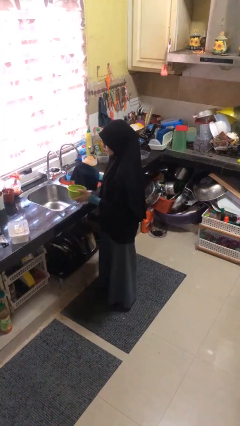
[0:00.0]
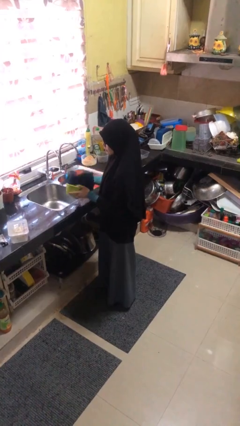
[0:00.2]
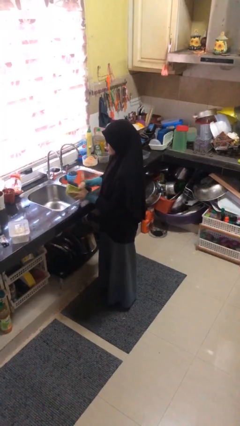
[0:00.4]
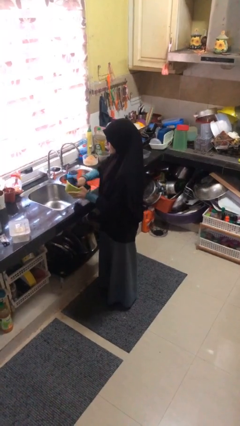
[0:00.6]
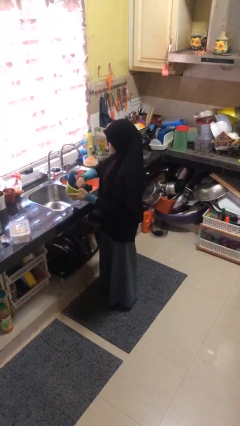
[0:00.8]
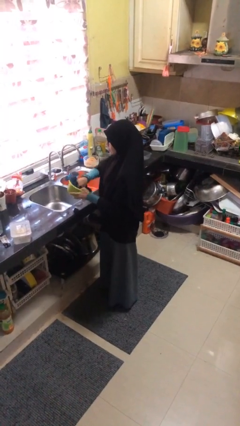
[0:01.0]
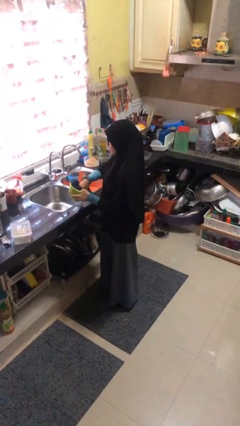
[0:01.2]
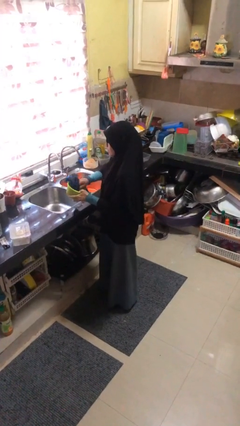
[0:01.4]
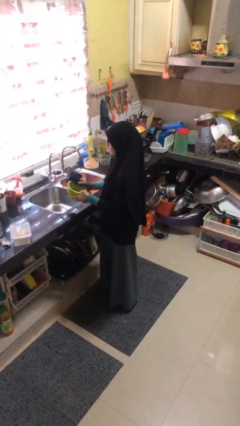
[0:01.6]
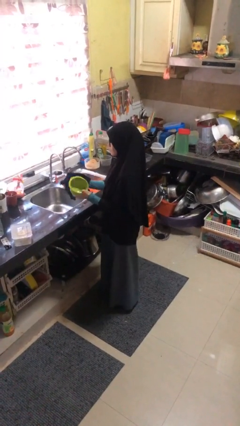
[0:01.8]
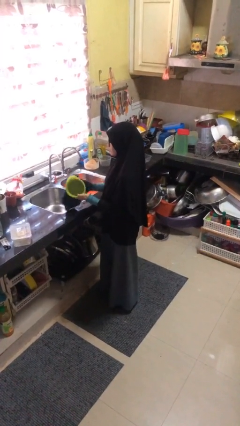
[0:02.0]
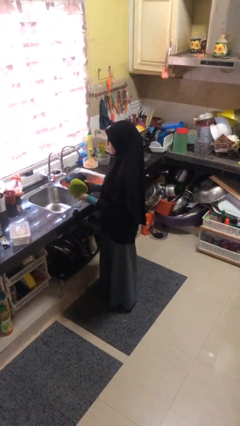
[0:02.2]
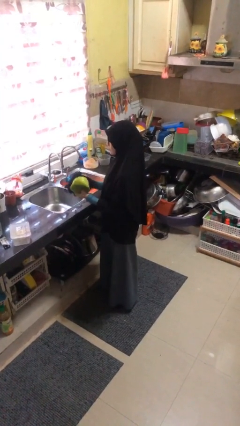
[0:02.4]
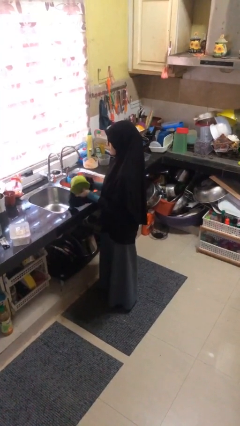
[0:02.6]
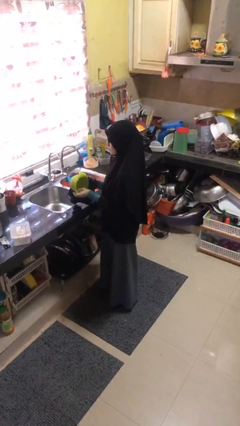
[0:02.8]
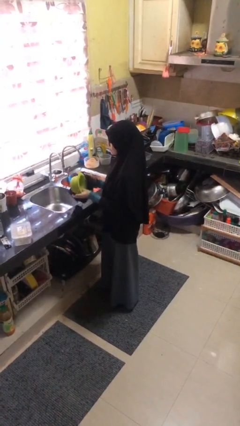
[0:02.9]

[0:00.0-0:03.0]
person dries dish

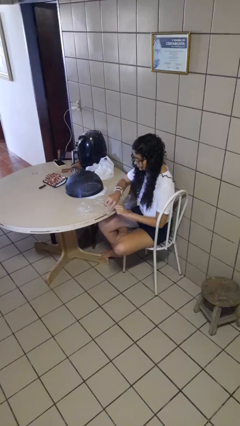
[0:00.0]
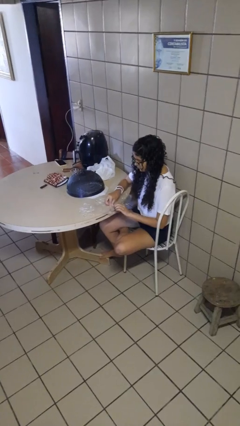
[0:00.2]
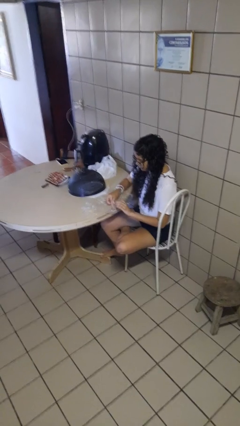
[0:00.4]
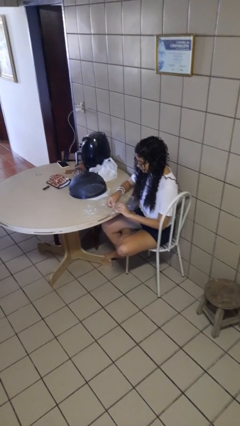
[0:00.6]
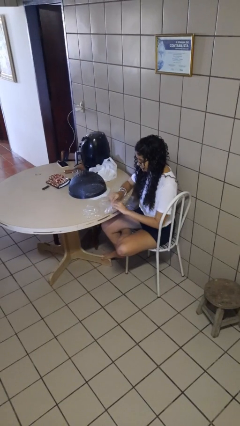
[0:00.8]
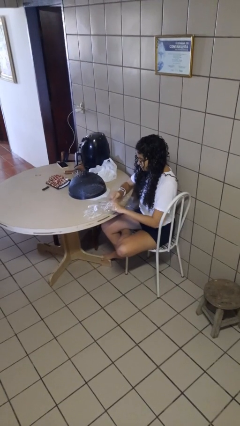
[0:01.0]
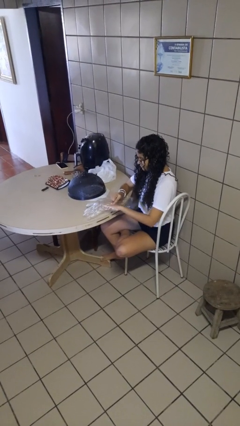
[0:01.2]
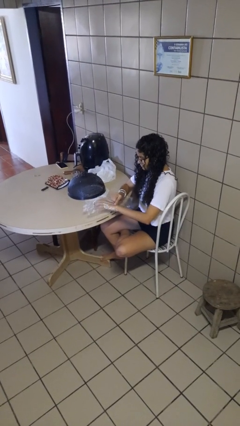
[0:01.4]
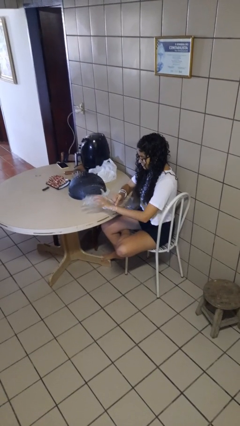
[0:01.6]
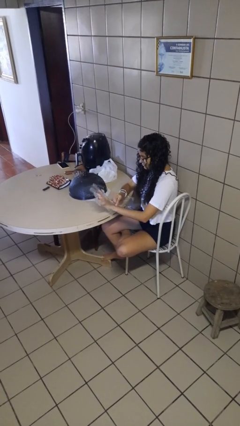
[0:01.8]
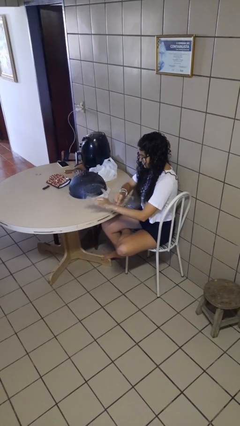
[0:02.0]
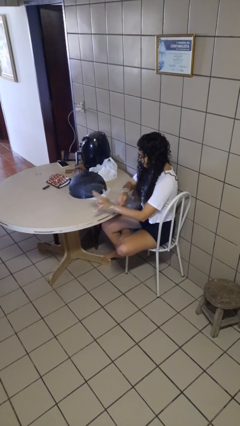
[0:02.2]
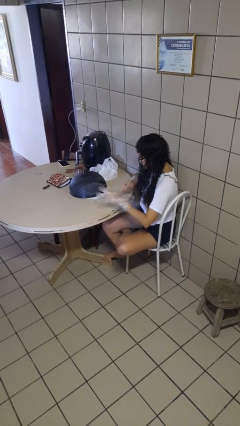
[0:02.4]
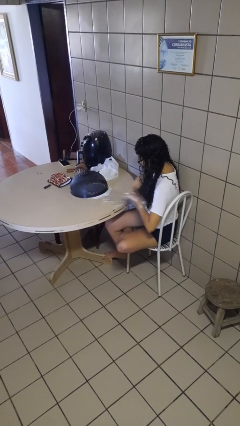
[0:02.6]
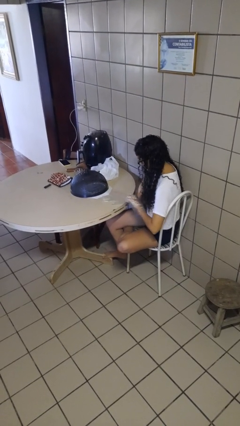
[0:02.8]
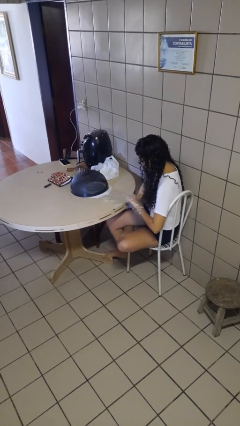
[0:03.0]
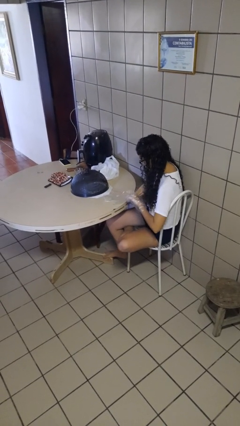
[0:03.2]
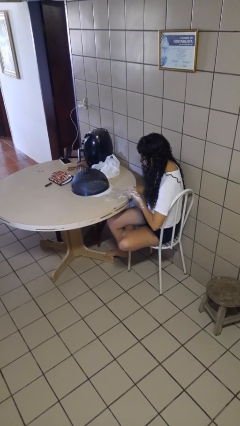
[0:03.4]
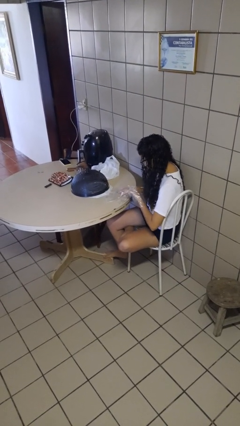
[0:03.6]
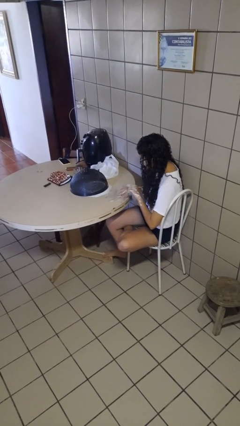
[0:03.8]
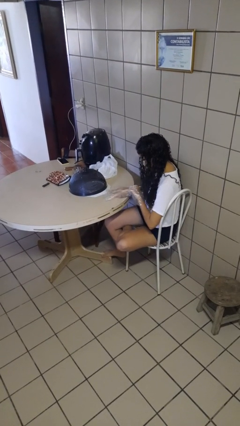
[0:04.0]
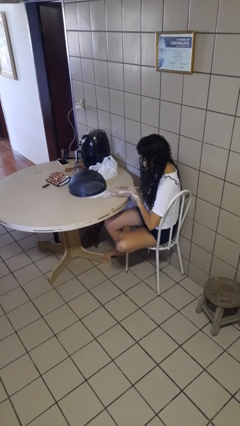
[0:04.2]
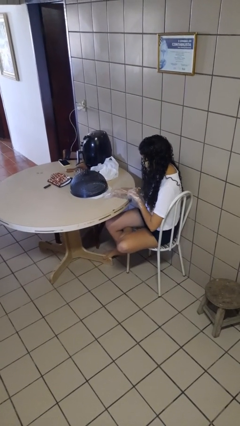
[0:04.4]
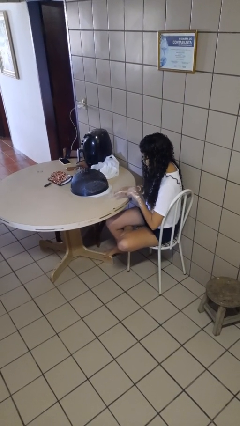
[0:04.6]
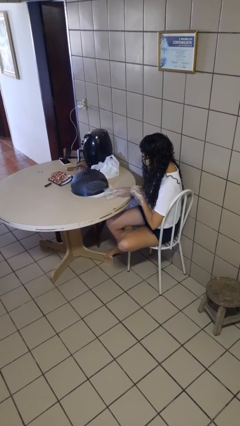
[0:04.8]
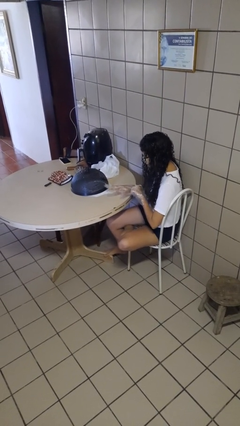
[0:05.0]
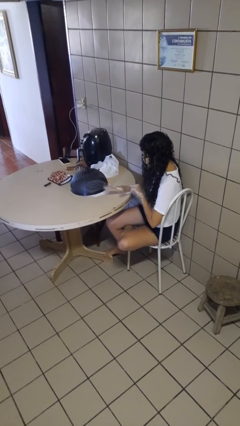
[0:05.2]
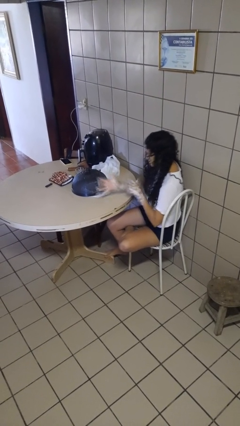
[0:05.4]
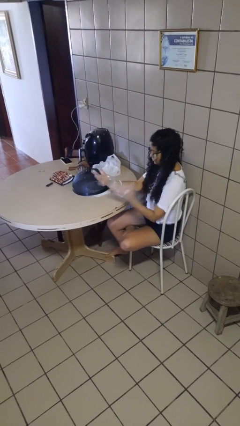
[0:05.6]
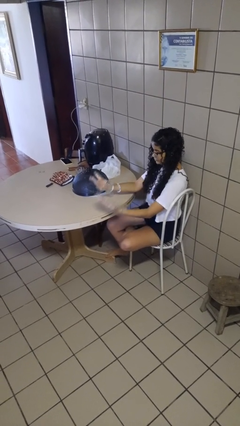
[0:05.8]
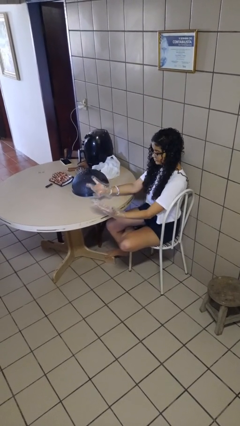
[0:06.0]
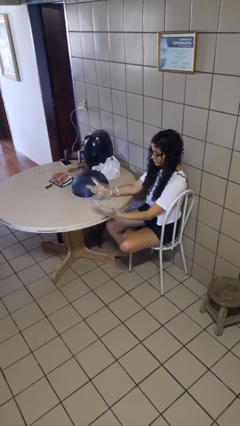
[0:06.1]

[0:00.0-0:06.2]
person puts on gloves

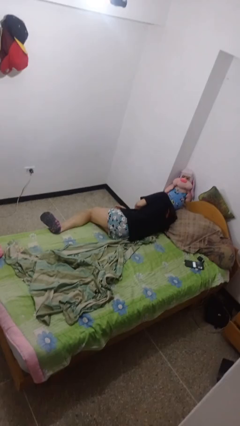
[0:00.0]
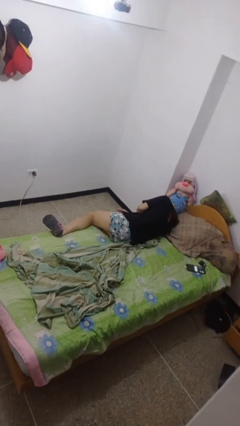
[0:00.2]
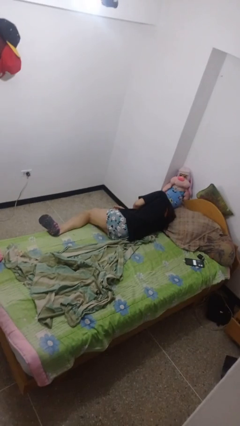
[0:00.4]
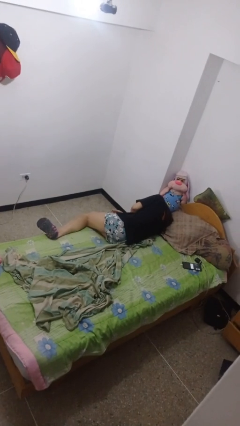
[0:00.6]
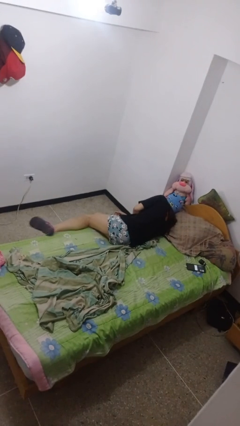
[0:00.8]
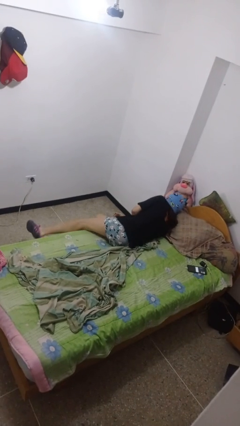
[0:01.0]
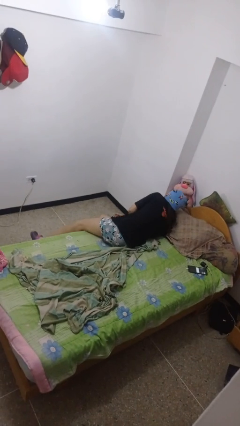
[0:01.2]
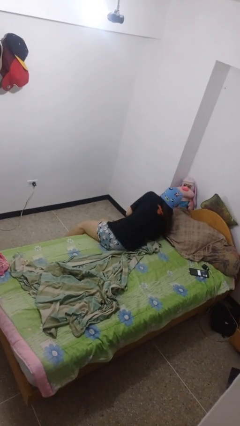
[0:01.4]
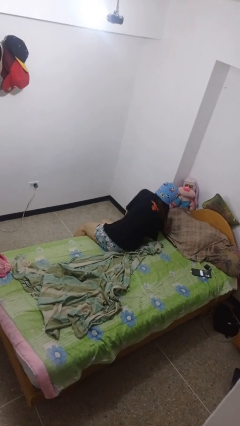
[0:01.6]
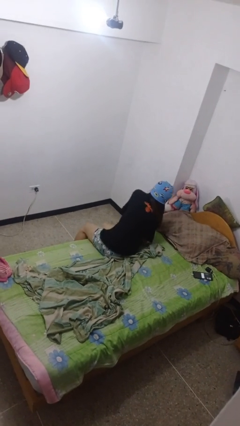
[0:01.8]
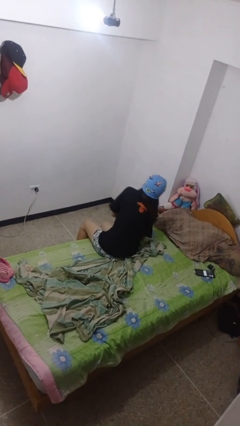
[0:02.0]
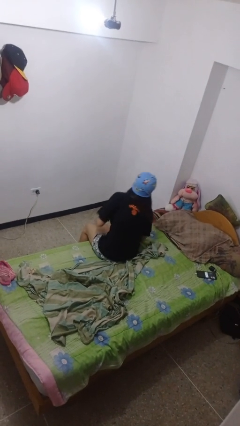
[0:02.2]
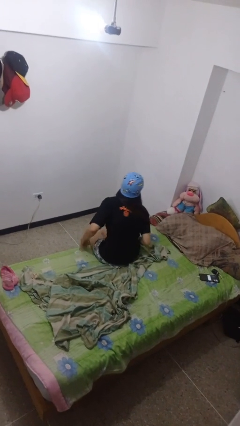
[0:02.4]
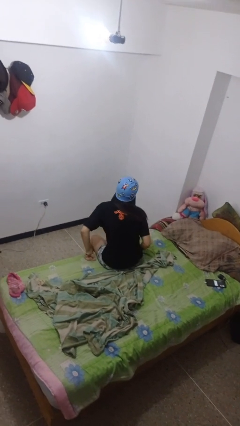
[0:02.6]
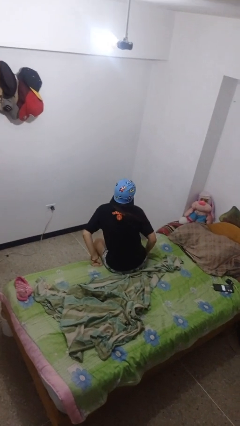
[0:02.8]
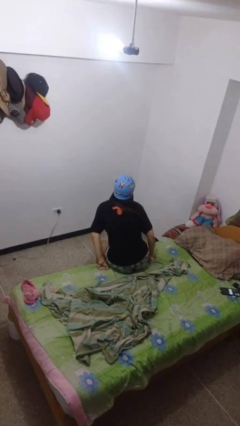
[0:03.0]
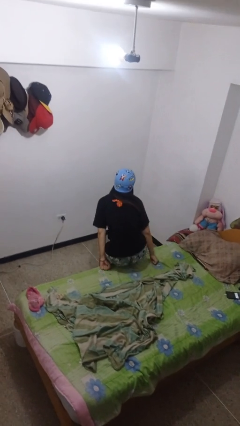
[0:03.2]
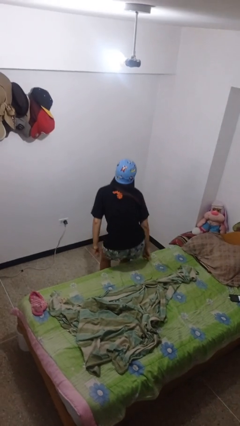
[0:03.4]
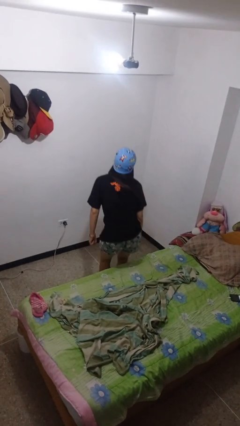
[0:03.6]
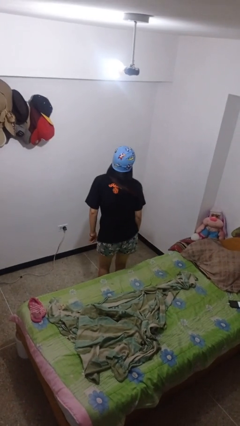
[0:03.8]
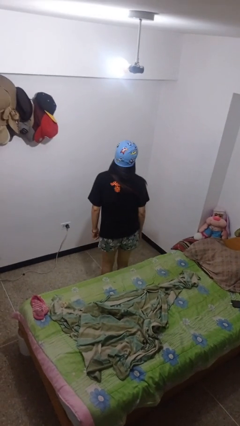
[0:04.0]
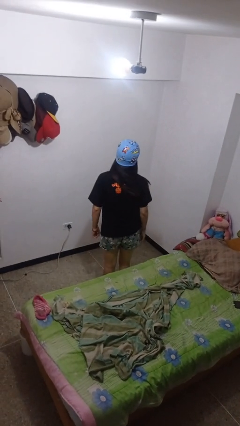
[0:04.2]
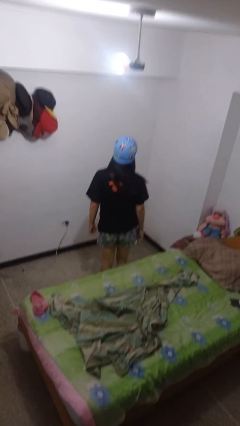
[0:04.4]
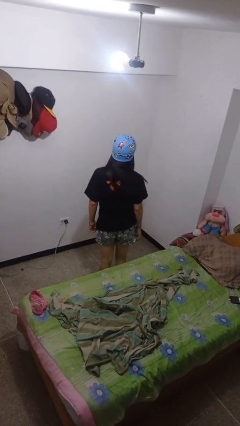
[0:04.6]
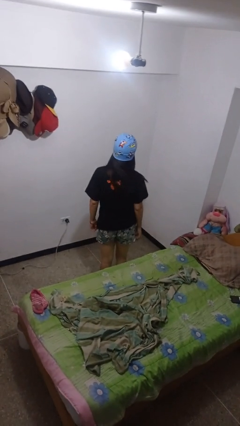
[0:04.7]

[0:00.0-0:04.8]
person stands up

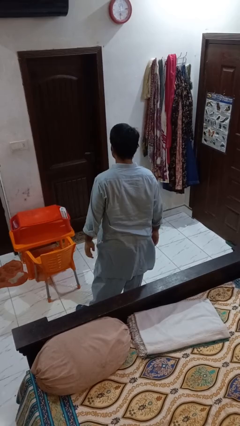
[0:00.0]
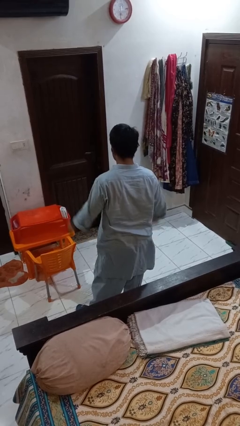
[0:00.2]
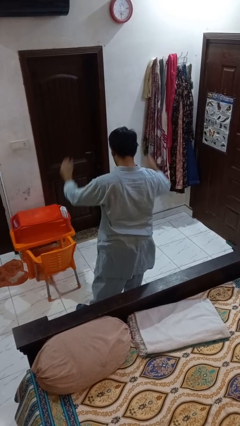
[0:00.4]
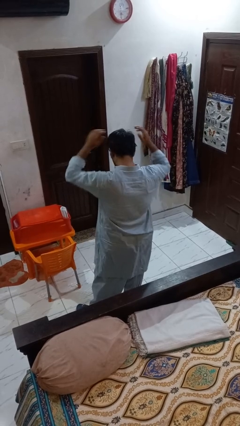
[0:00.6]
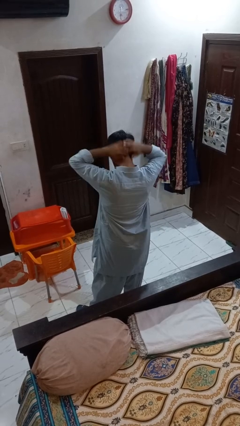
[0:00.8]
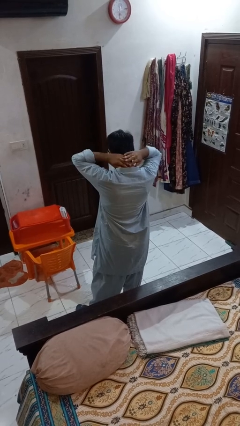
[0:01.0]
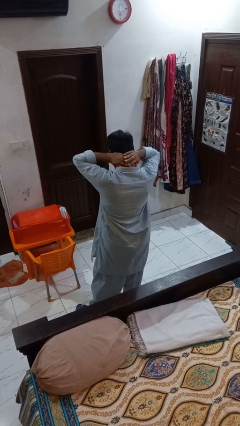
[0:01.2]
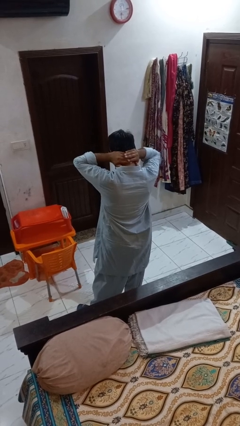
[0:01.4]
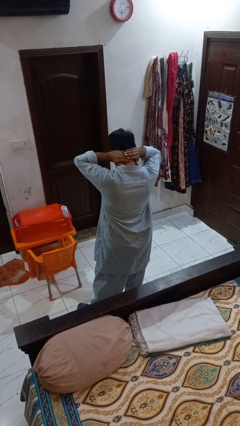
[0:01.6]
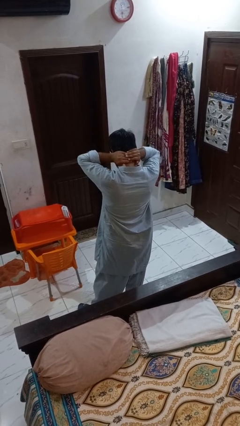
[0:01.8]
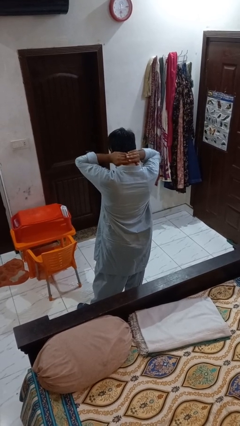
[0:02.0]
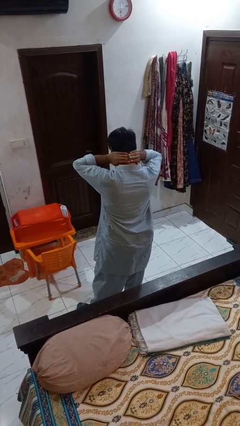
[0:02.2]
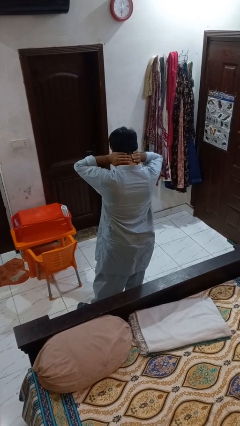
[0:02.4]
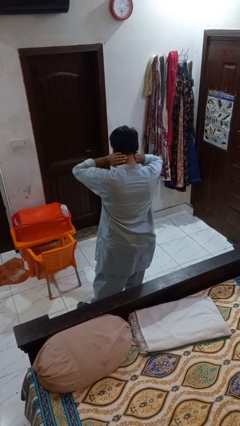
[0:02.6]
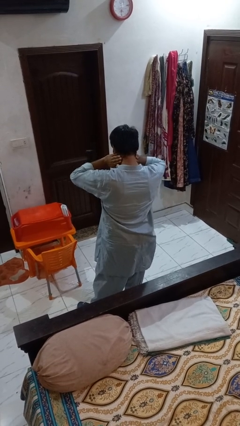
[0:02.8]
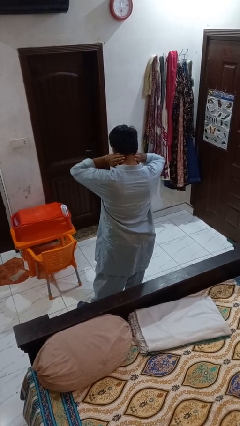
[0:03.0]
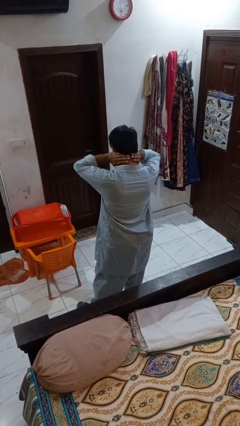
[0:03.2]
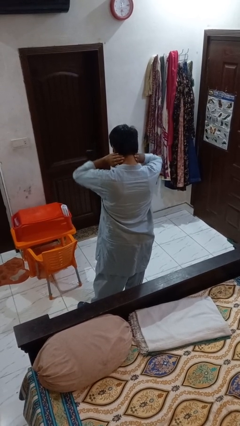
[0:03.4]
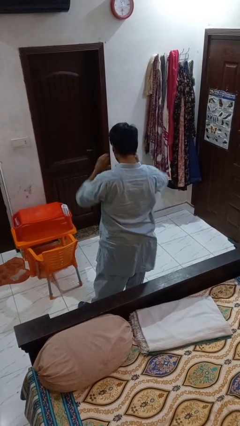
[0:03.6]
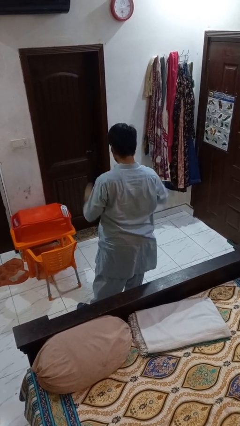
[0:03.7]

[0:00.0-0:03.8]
person rubs neck
